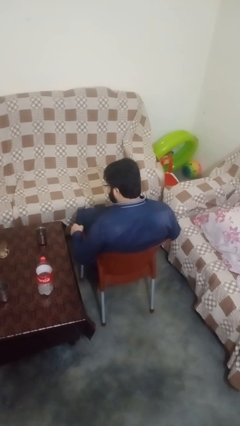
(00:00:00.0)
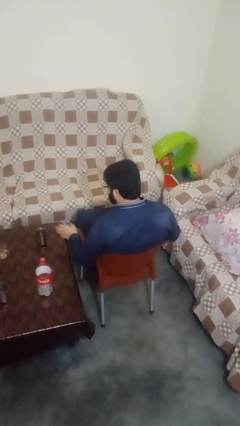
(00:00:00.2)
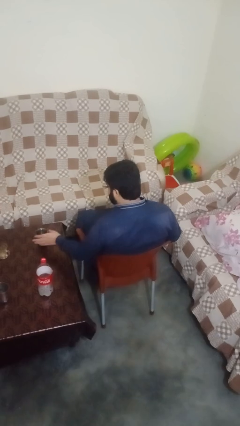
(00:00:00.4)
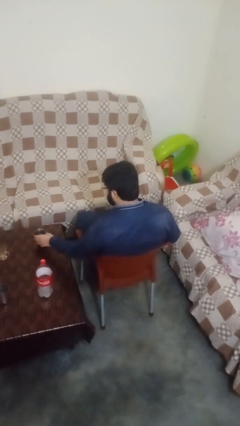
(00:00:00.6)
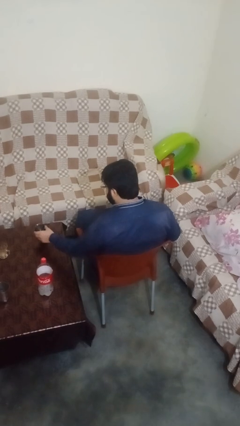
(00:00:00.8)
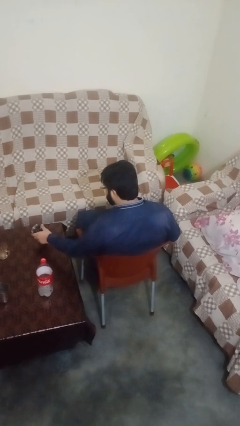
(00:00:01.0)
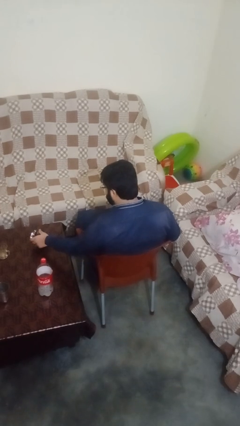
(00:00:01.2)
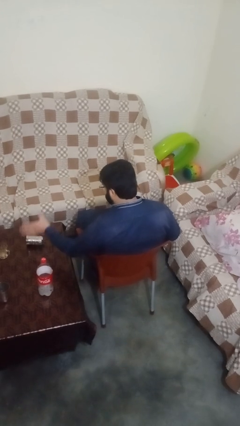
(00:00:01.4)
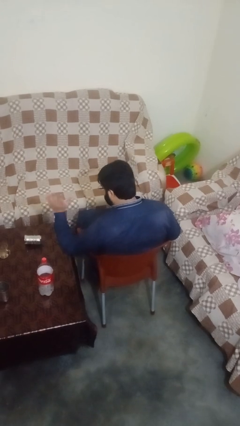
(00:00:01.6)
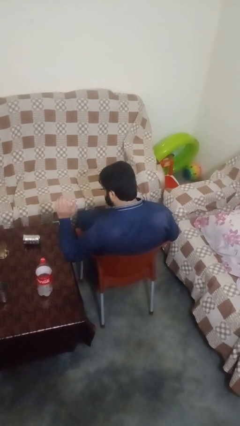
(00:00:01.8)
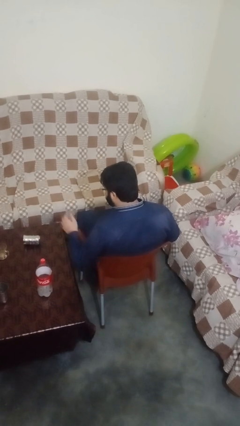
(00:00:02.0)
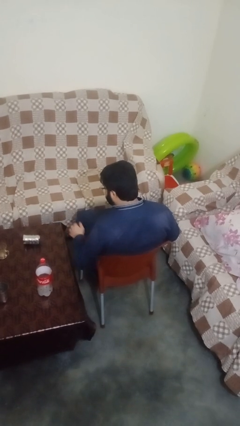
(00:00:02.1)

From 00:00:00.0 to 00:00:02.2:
person knocks over glass

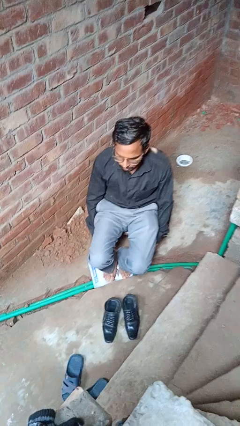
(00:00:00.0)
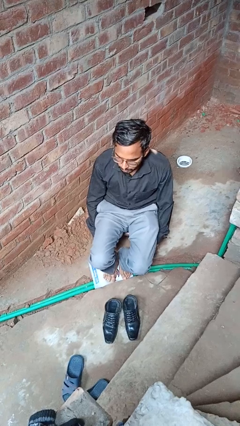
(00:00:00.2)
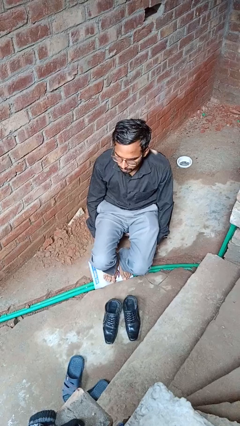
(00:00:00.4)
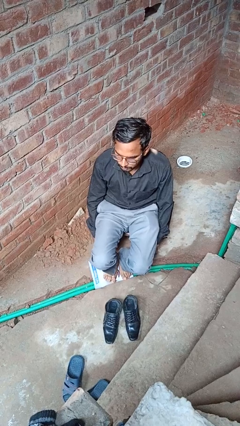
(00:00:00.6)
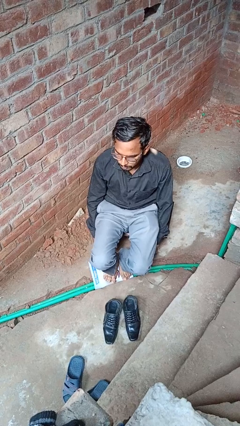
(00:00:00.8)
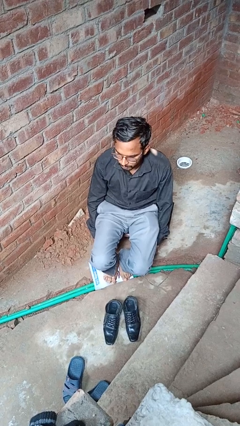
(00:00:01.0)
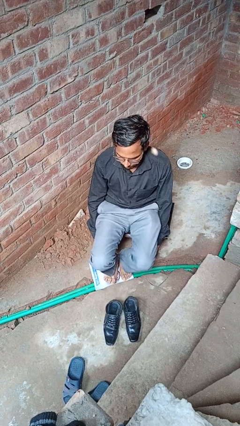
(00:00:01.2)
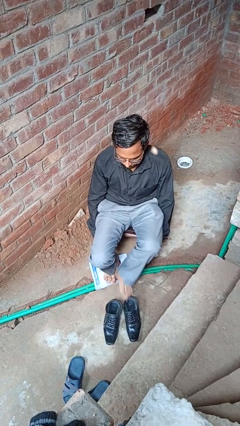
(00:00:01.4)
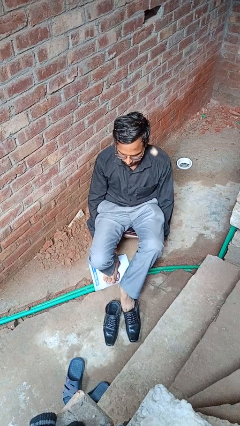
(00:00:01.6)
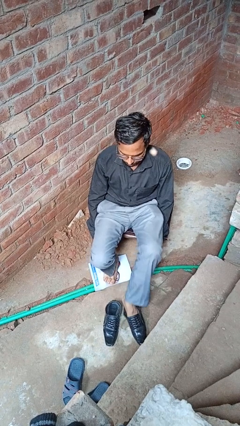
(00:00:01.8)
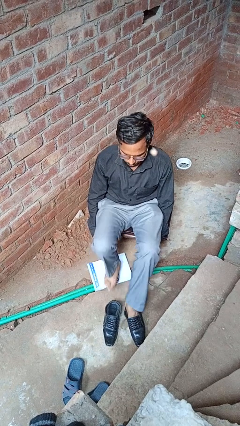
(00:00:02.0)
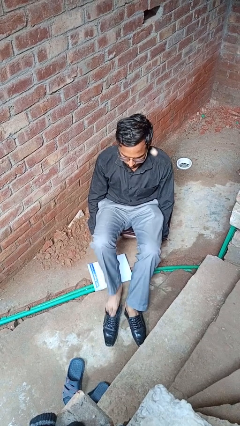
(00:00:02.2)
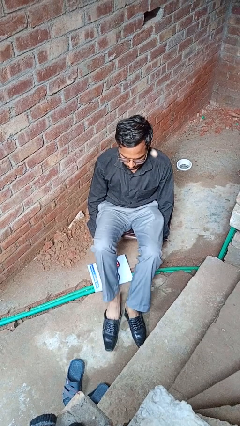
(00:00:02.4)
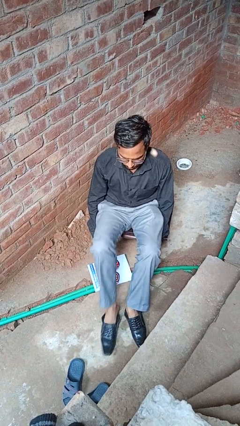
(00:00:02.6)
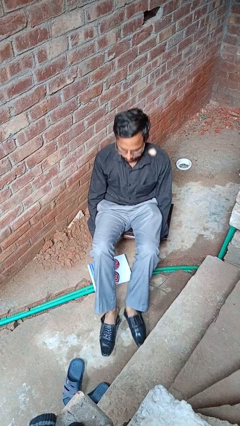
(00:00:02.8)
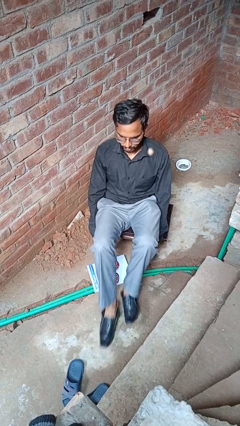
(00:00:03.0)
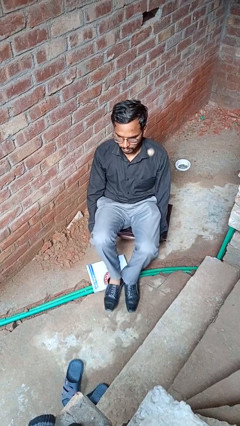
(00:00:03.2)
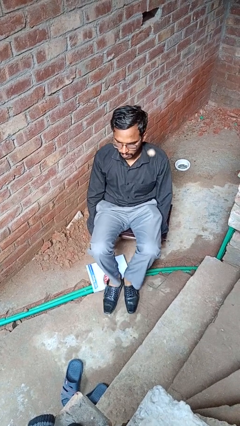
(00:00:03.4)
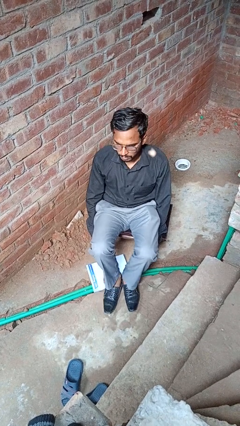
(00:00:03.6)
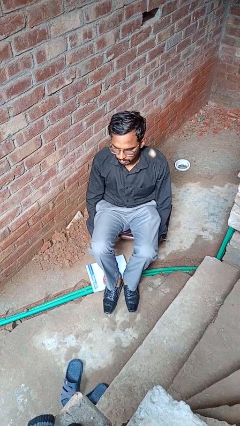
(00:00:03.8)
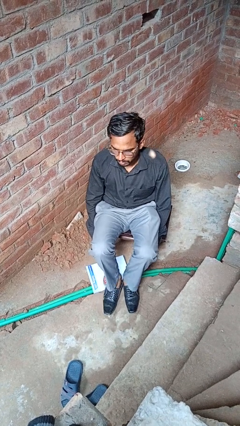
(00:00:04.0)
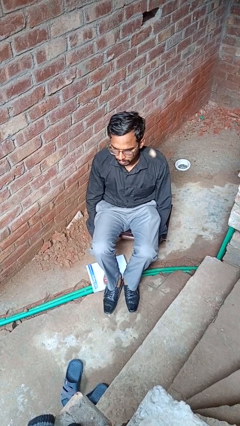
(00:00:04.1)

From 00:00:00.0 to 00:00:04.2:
person puts on shoes

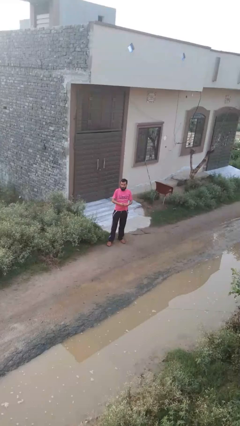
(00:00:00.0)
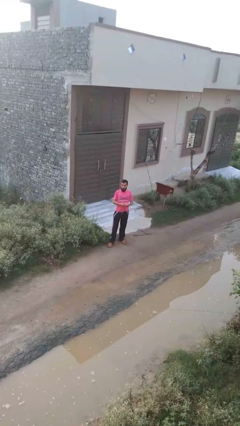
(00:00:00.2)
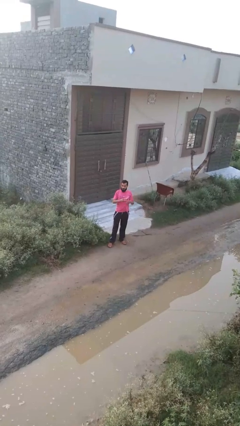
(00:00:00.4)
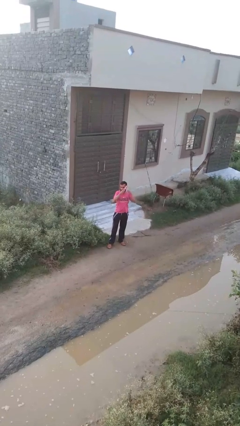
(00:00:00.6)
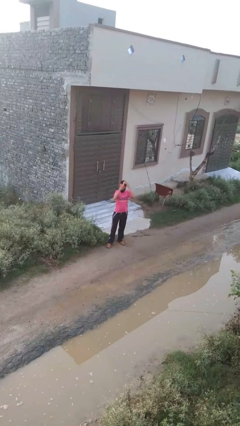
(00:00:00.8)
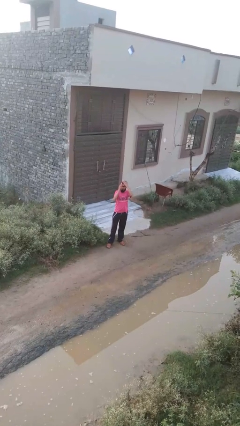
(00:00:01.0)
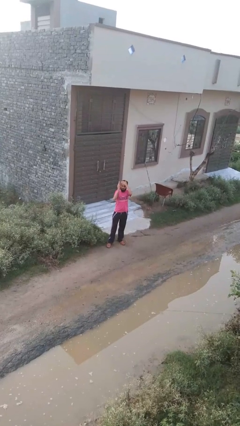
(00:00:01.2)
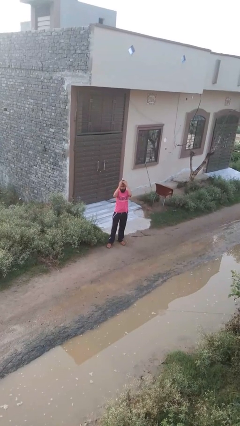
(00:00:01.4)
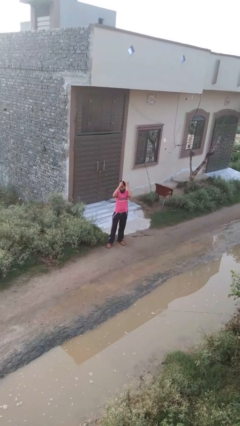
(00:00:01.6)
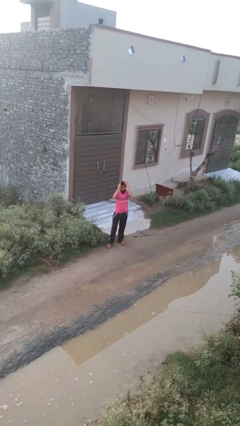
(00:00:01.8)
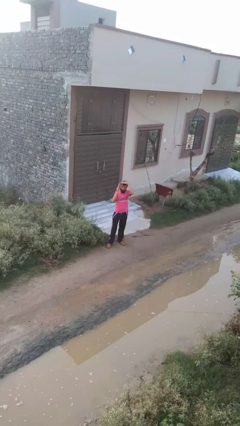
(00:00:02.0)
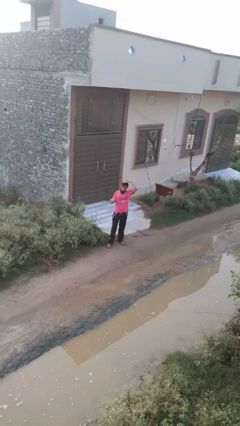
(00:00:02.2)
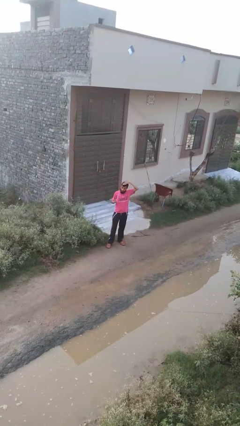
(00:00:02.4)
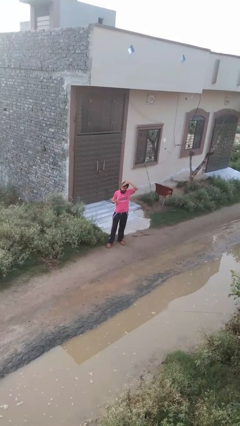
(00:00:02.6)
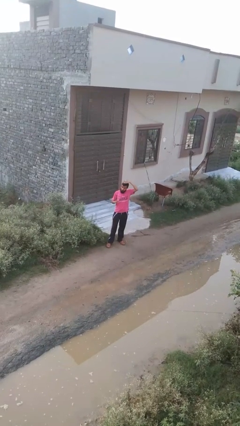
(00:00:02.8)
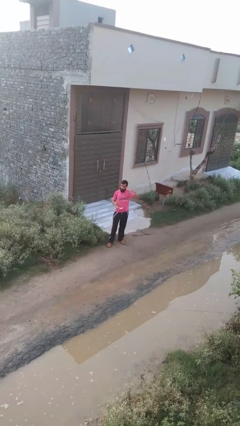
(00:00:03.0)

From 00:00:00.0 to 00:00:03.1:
person brushes hair

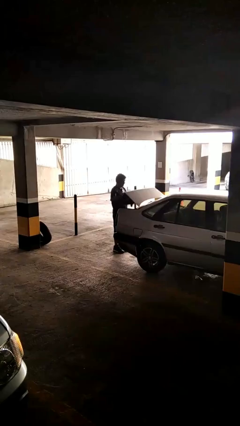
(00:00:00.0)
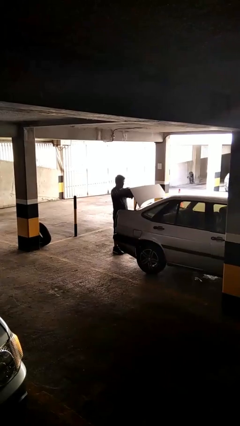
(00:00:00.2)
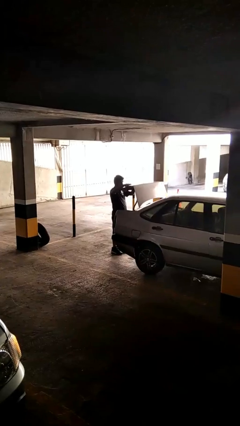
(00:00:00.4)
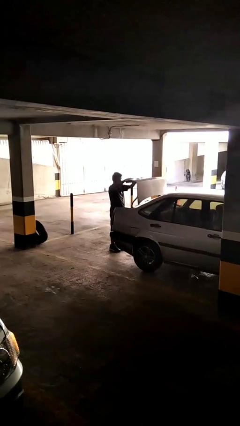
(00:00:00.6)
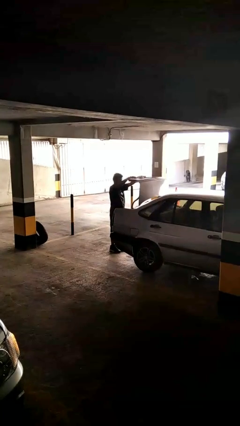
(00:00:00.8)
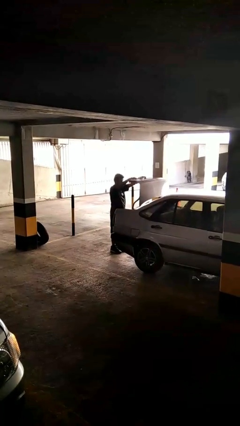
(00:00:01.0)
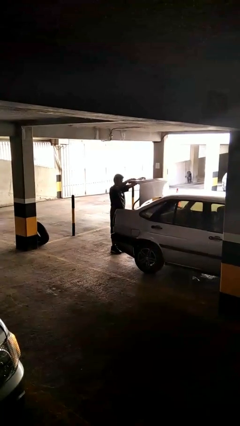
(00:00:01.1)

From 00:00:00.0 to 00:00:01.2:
person opens car trunk

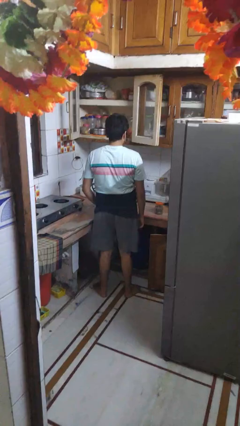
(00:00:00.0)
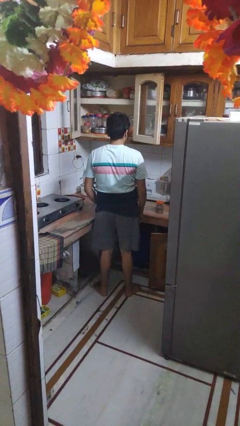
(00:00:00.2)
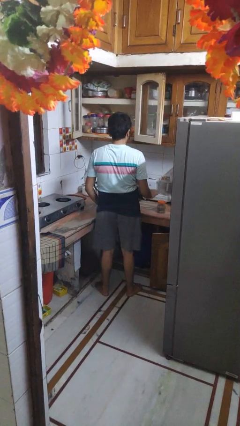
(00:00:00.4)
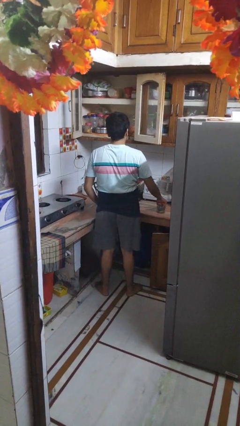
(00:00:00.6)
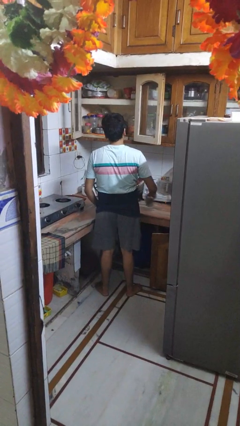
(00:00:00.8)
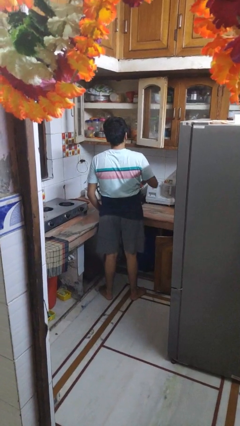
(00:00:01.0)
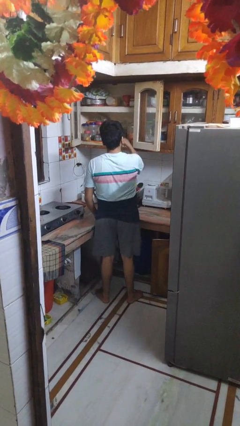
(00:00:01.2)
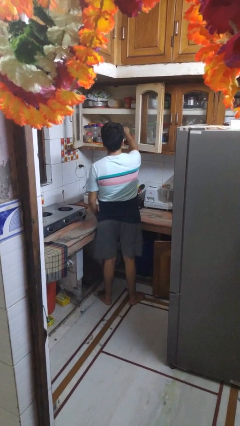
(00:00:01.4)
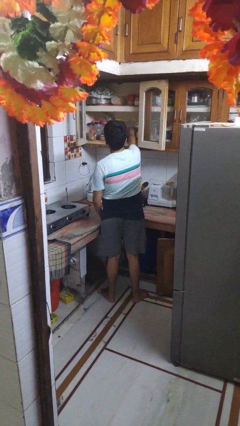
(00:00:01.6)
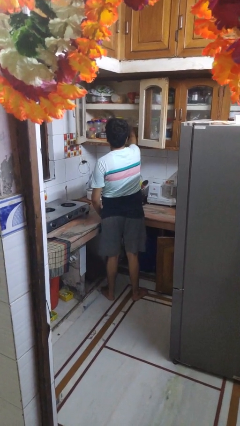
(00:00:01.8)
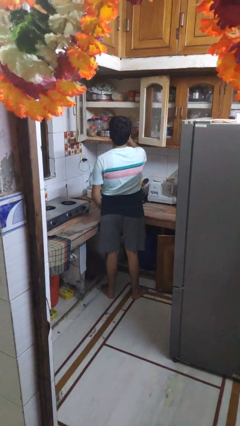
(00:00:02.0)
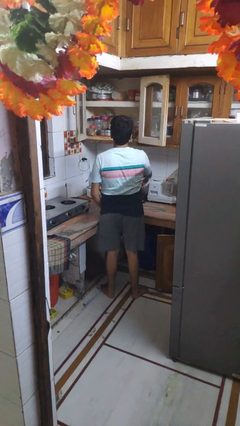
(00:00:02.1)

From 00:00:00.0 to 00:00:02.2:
person puts object in cabinet

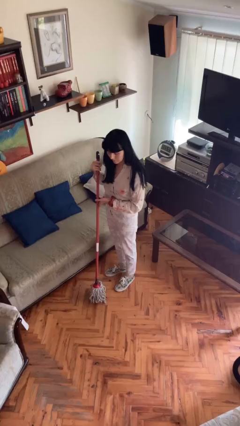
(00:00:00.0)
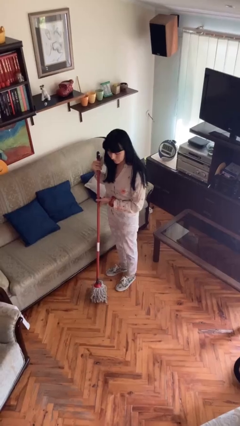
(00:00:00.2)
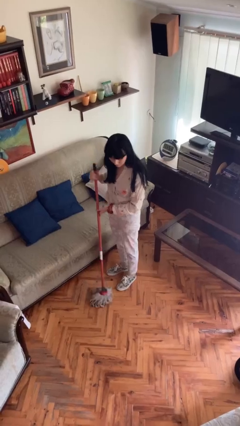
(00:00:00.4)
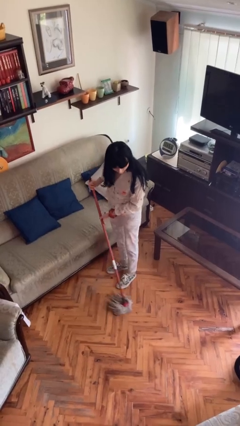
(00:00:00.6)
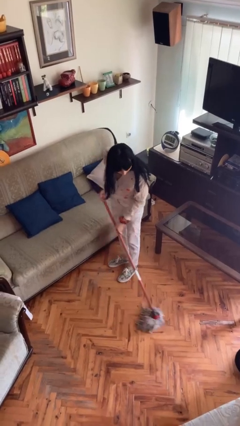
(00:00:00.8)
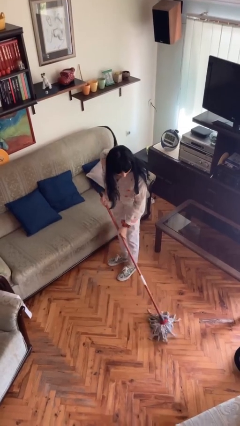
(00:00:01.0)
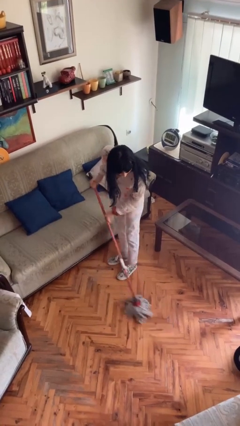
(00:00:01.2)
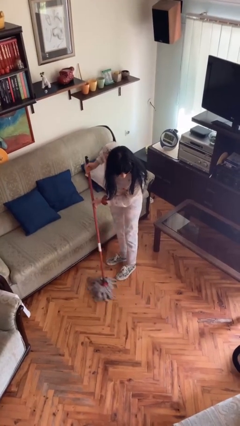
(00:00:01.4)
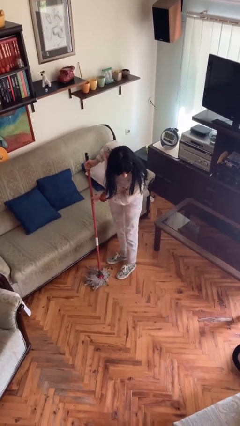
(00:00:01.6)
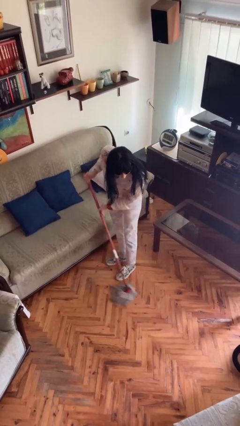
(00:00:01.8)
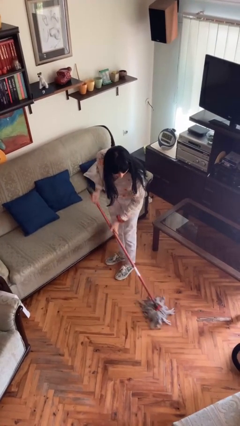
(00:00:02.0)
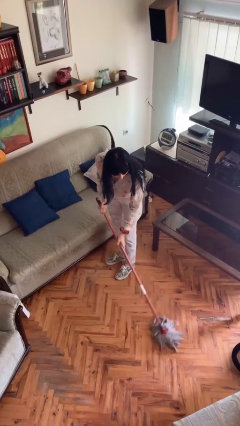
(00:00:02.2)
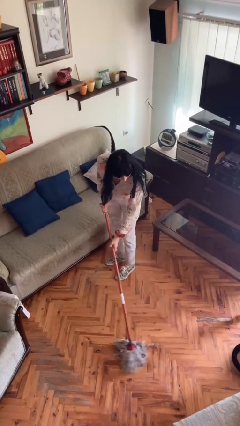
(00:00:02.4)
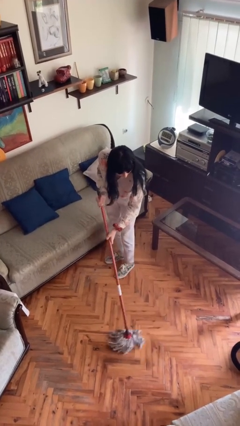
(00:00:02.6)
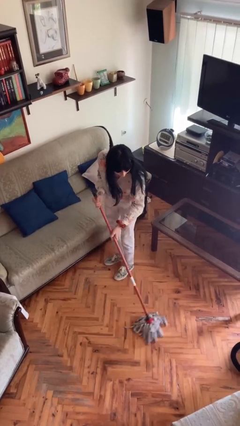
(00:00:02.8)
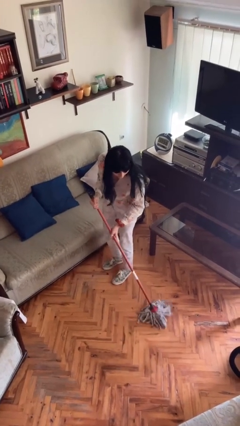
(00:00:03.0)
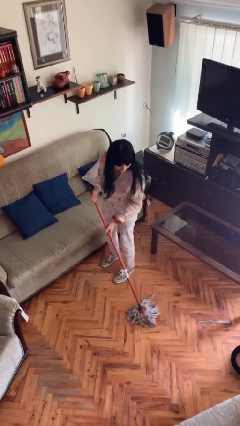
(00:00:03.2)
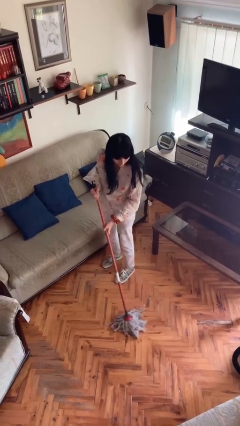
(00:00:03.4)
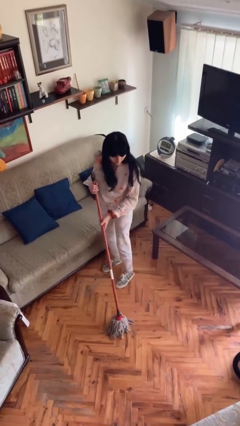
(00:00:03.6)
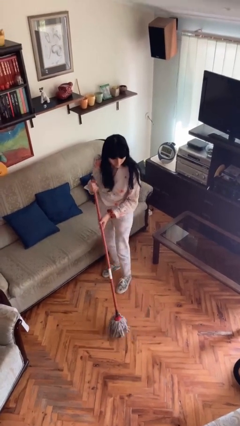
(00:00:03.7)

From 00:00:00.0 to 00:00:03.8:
person sweeps floor

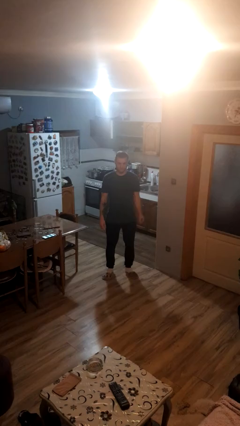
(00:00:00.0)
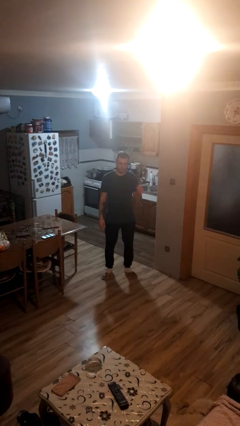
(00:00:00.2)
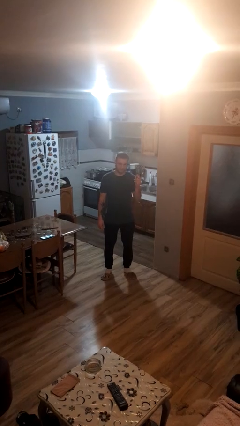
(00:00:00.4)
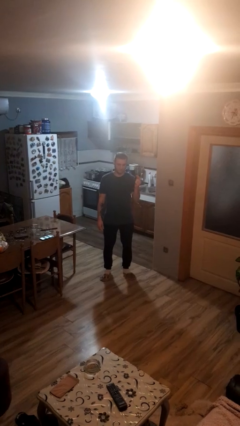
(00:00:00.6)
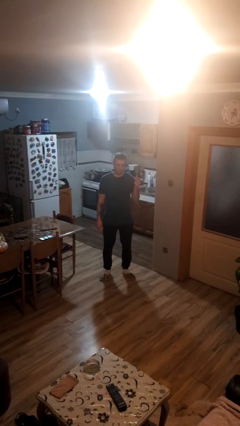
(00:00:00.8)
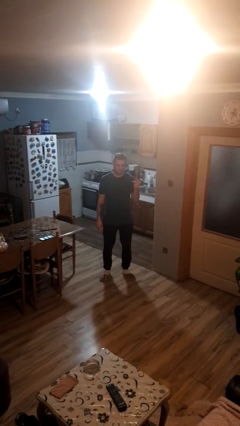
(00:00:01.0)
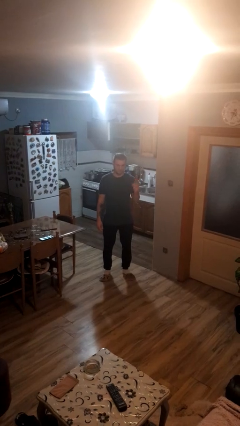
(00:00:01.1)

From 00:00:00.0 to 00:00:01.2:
person snaps fingers
